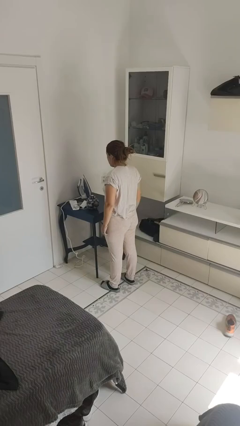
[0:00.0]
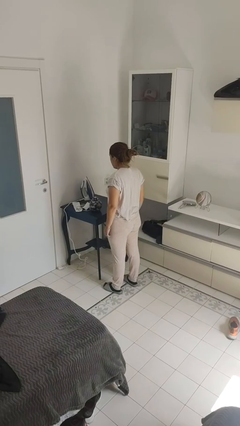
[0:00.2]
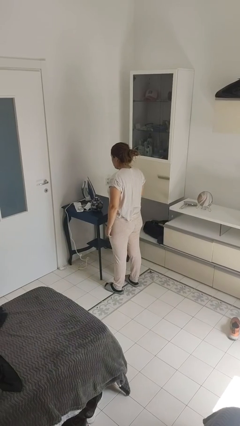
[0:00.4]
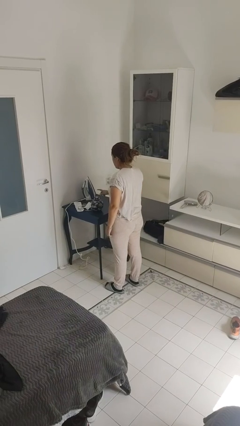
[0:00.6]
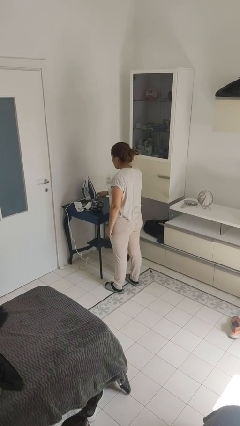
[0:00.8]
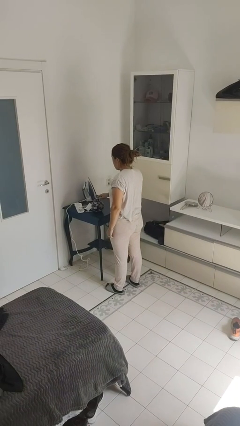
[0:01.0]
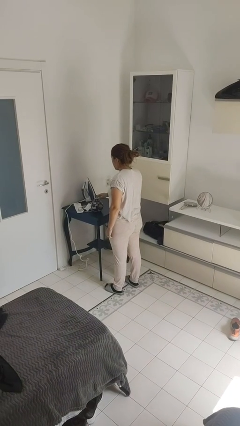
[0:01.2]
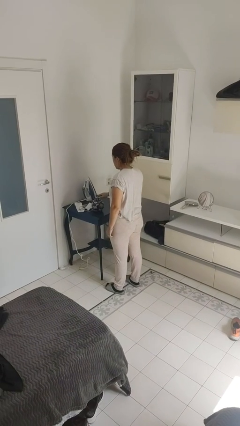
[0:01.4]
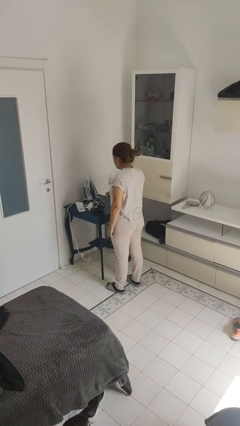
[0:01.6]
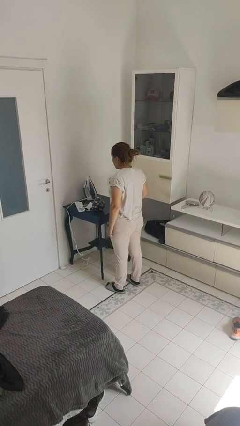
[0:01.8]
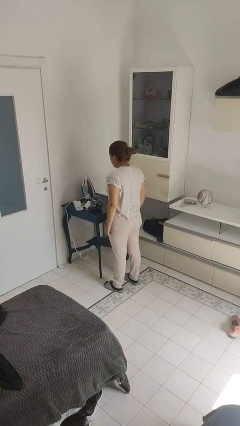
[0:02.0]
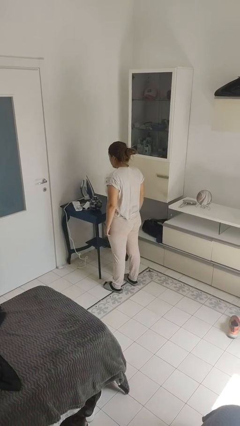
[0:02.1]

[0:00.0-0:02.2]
person taps object with finger

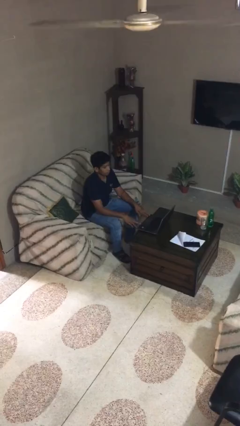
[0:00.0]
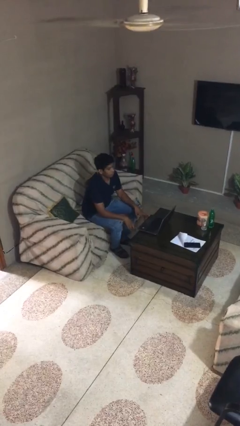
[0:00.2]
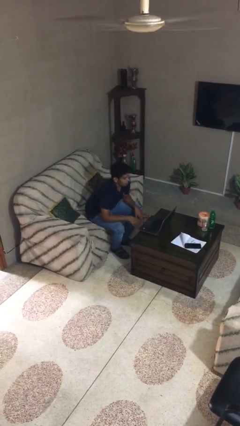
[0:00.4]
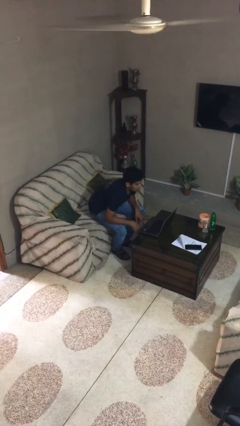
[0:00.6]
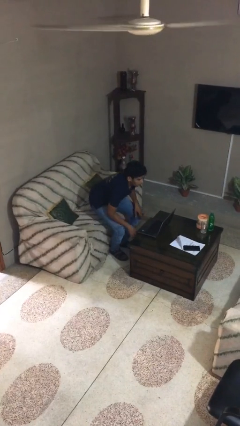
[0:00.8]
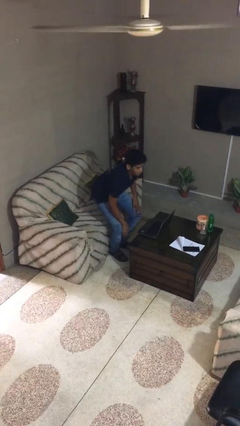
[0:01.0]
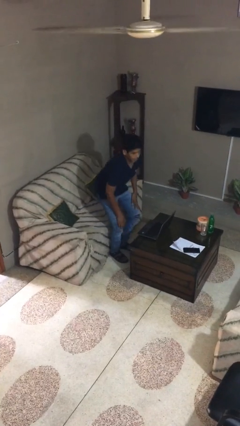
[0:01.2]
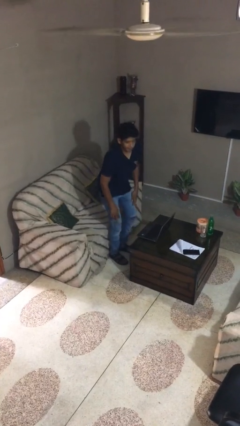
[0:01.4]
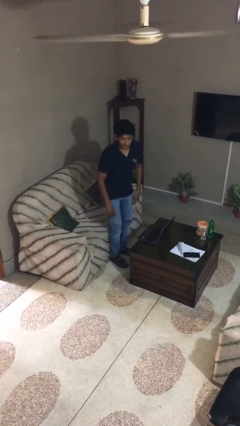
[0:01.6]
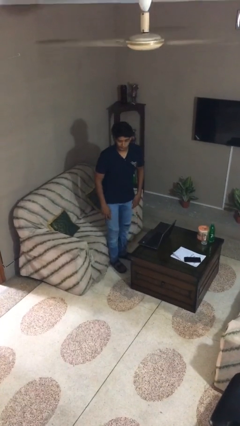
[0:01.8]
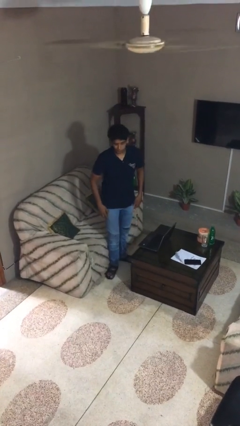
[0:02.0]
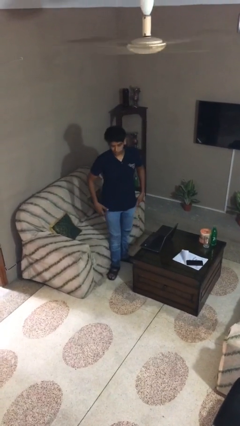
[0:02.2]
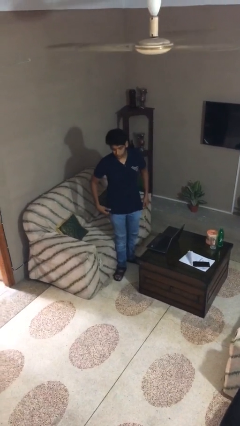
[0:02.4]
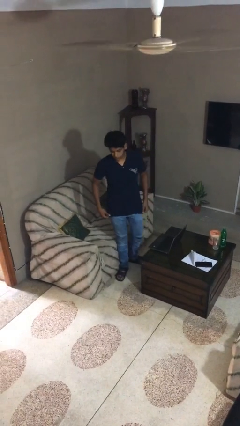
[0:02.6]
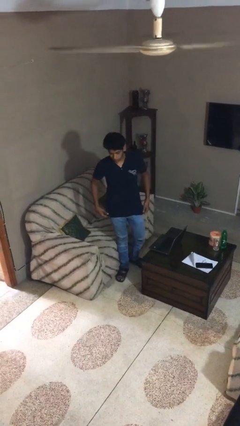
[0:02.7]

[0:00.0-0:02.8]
person stands up

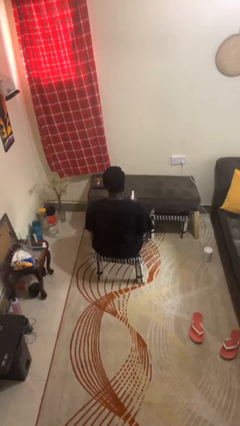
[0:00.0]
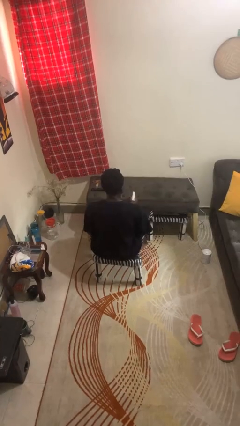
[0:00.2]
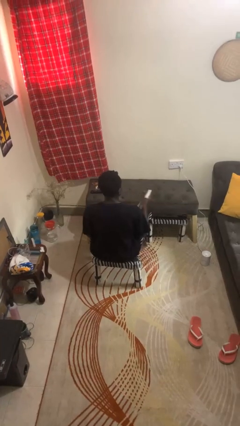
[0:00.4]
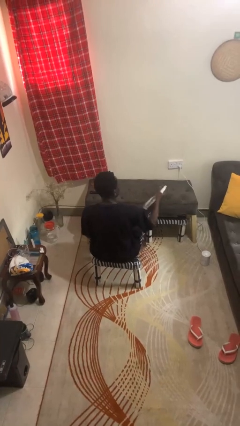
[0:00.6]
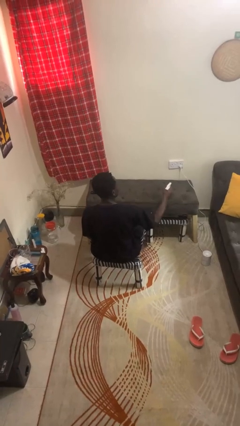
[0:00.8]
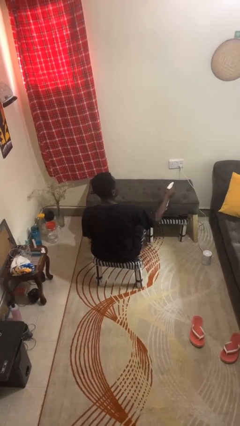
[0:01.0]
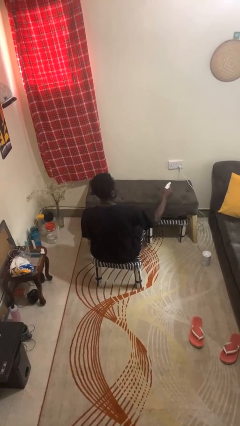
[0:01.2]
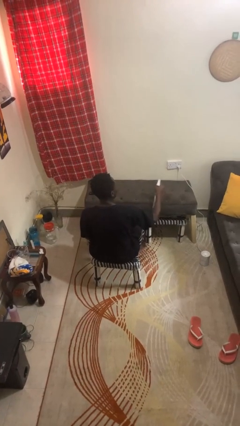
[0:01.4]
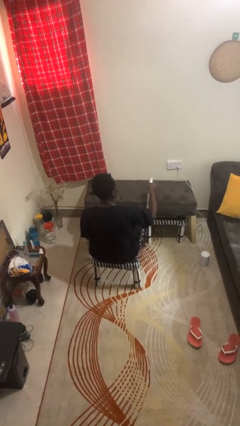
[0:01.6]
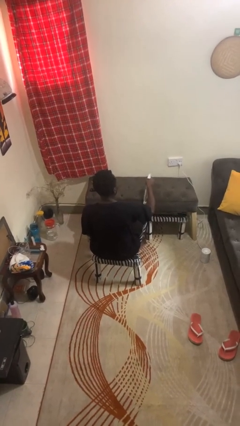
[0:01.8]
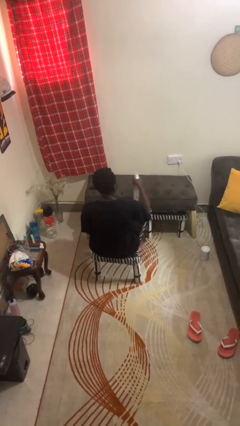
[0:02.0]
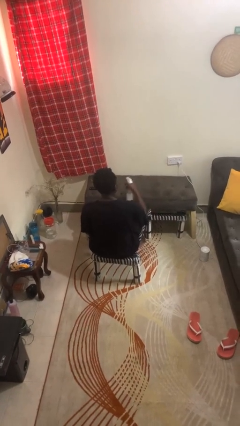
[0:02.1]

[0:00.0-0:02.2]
person sprays from bottle

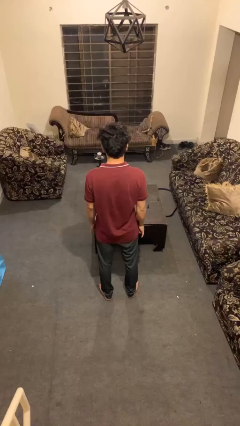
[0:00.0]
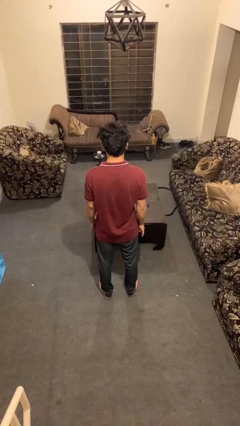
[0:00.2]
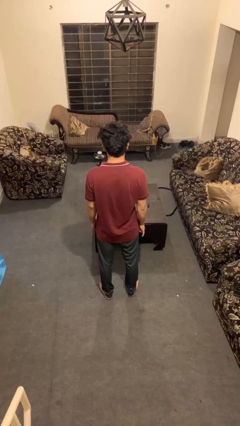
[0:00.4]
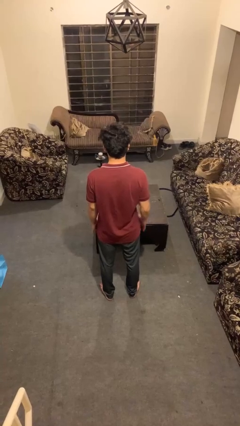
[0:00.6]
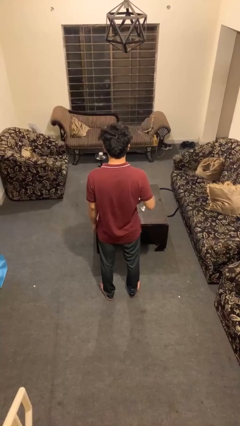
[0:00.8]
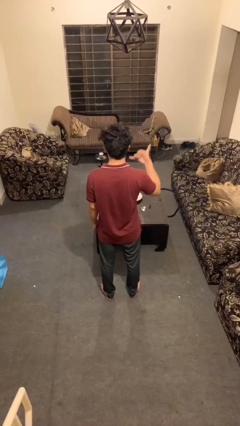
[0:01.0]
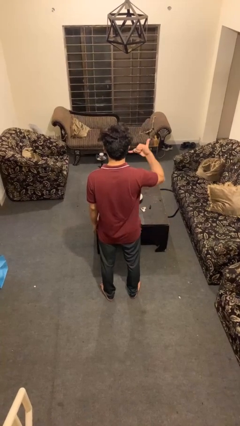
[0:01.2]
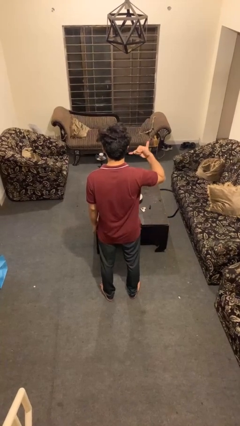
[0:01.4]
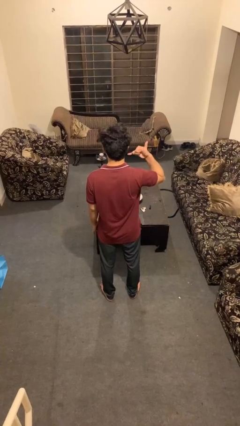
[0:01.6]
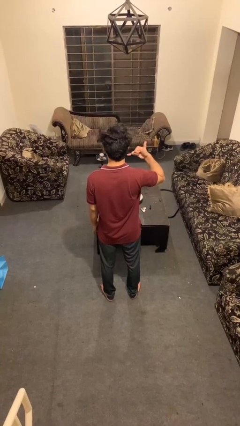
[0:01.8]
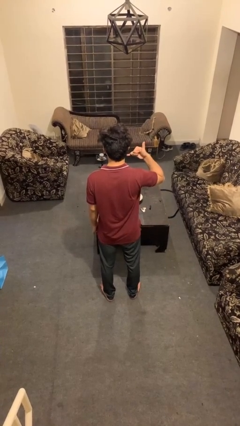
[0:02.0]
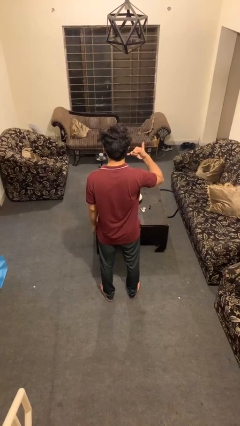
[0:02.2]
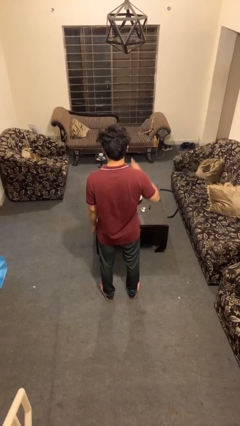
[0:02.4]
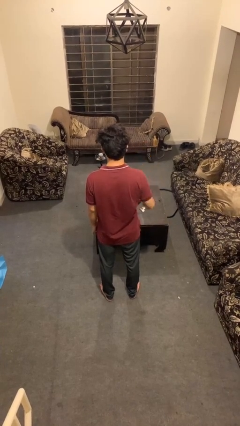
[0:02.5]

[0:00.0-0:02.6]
person gestures call me

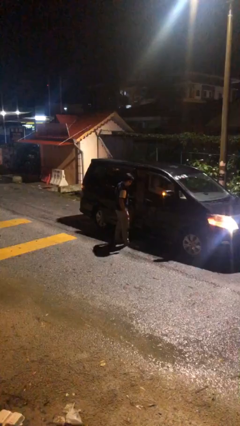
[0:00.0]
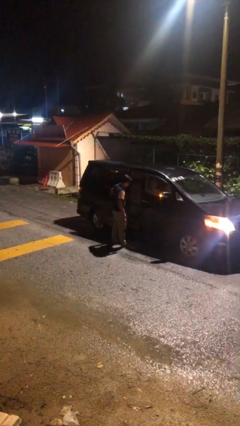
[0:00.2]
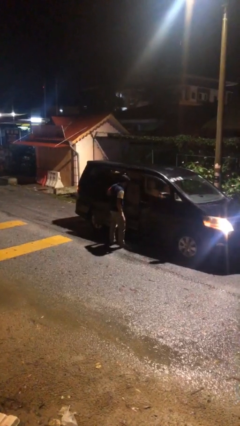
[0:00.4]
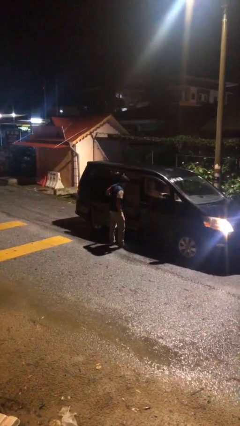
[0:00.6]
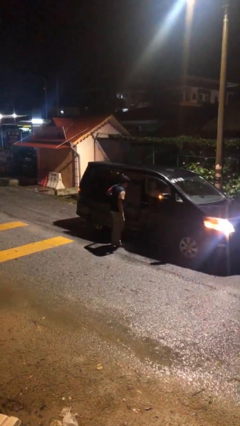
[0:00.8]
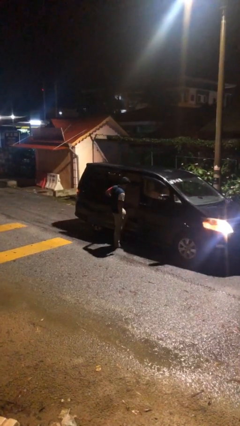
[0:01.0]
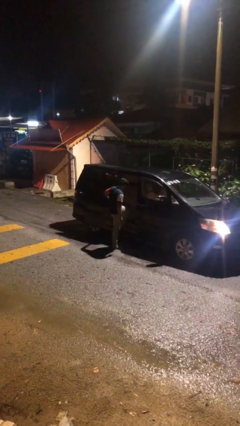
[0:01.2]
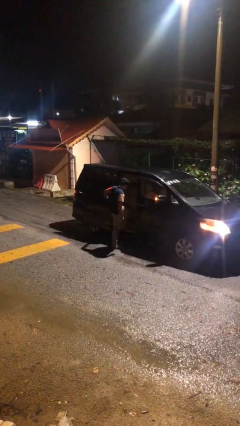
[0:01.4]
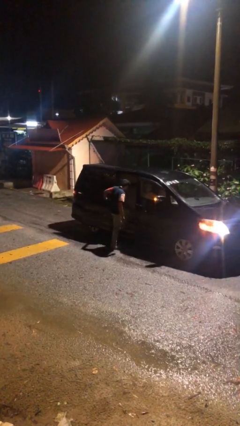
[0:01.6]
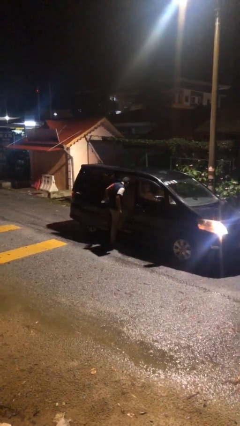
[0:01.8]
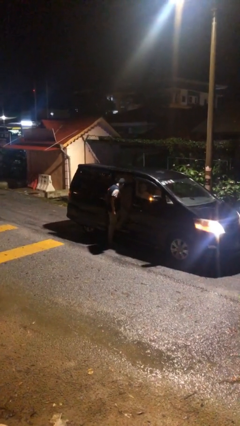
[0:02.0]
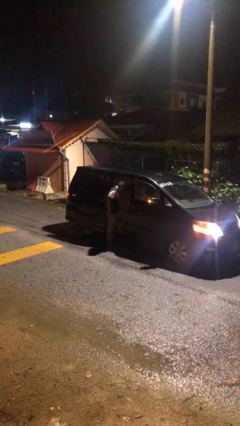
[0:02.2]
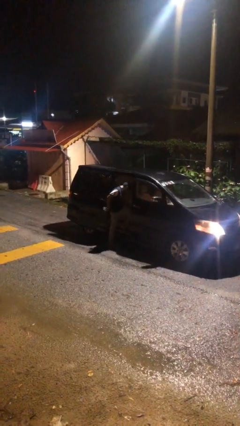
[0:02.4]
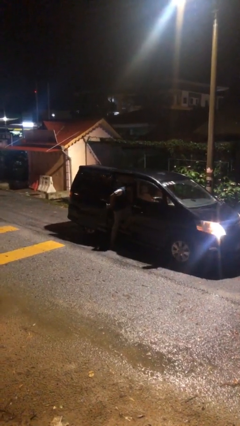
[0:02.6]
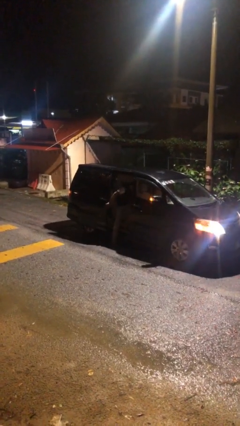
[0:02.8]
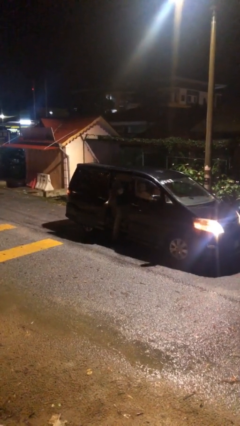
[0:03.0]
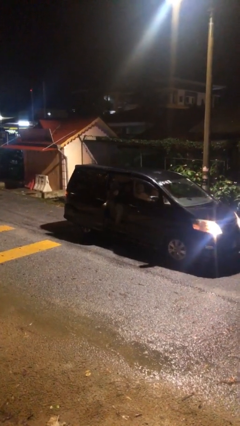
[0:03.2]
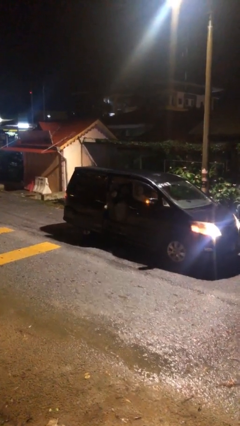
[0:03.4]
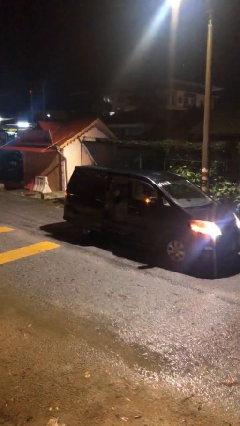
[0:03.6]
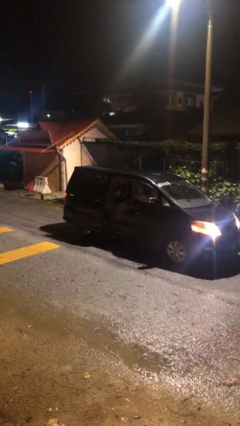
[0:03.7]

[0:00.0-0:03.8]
person enters car

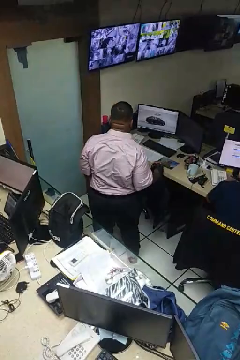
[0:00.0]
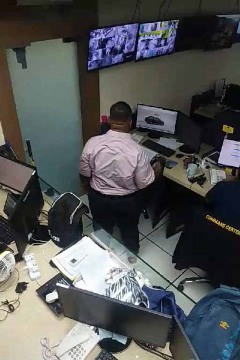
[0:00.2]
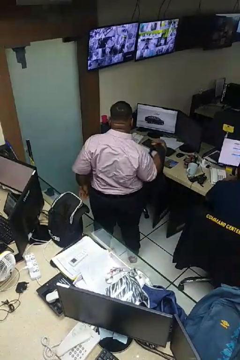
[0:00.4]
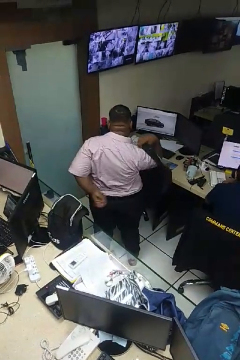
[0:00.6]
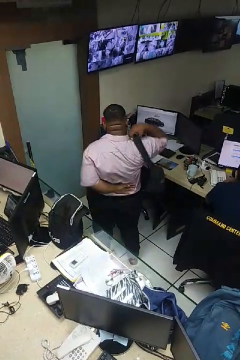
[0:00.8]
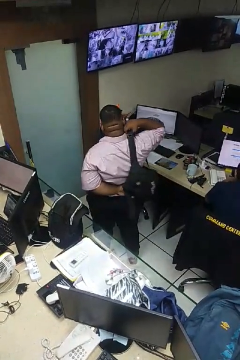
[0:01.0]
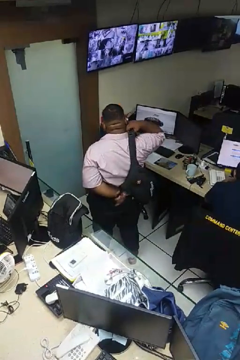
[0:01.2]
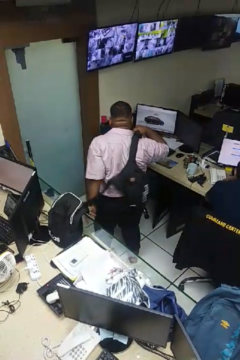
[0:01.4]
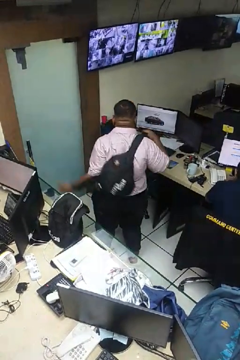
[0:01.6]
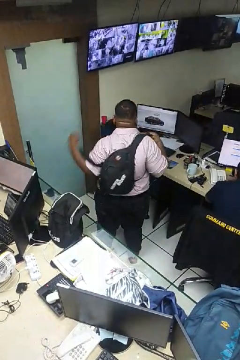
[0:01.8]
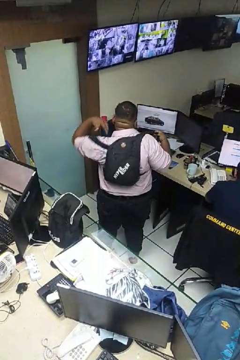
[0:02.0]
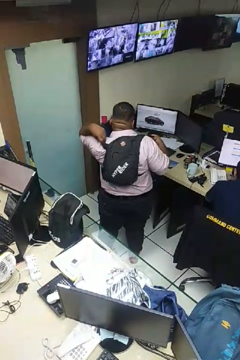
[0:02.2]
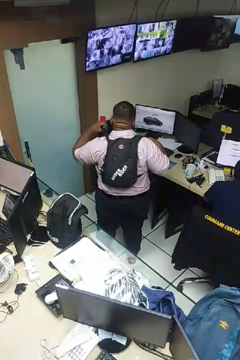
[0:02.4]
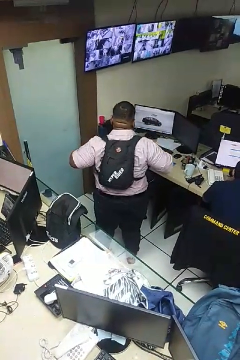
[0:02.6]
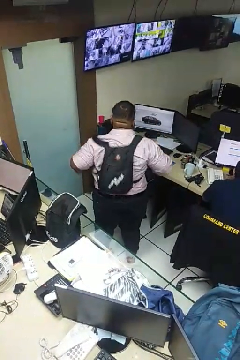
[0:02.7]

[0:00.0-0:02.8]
person puts on backpack

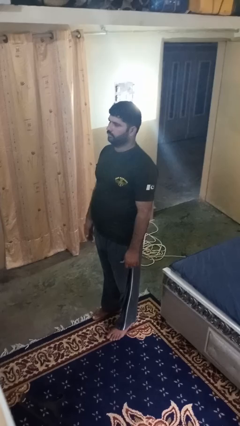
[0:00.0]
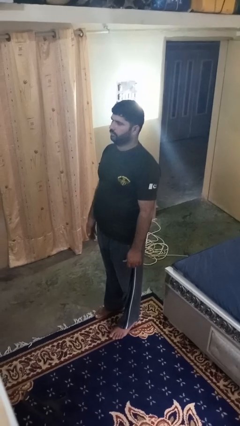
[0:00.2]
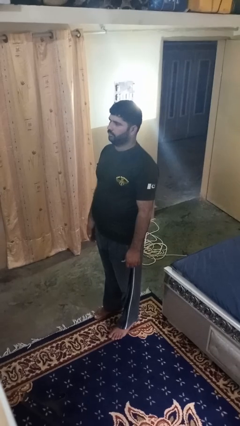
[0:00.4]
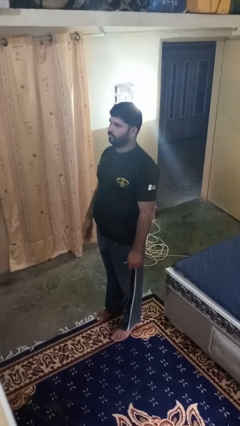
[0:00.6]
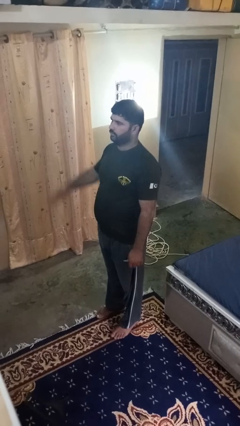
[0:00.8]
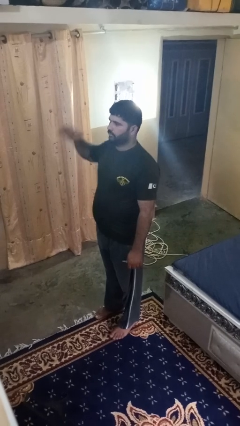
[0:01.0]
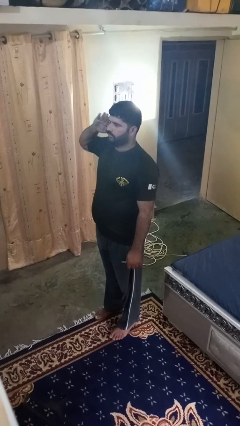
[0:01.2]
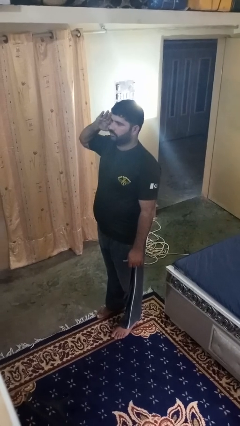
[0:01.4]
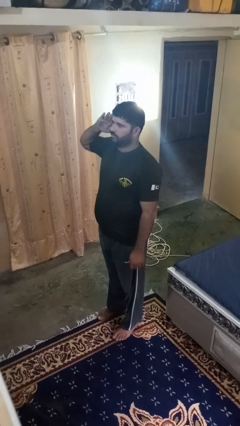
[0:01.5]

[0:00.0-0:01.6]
person salutes
